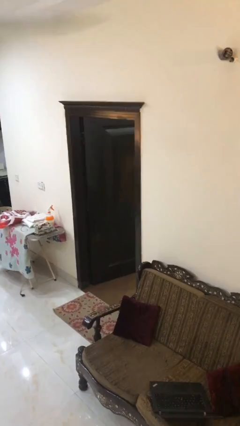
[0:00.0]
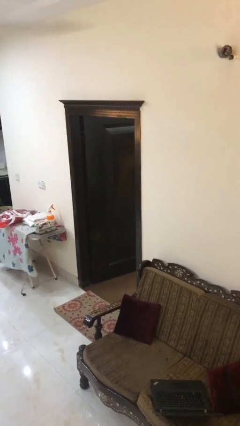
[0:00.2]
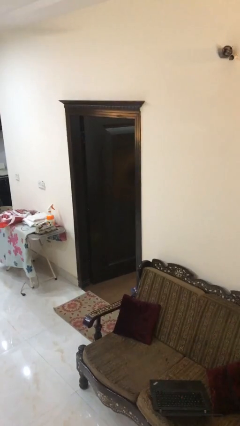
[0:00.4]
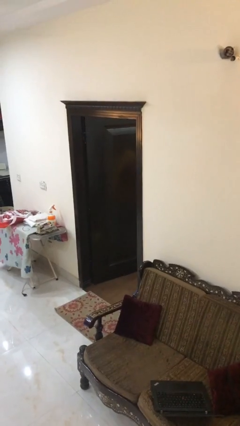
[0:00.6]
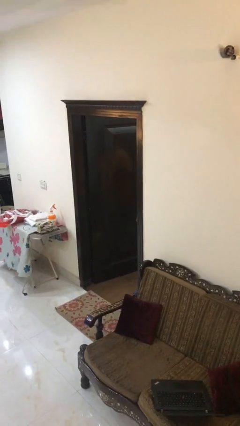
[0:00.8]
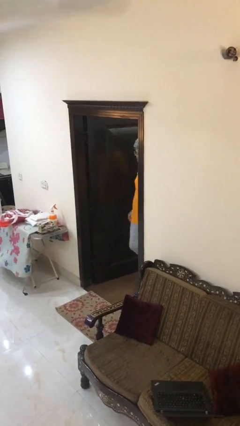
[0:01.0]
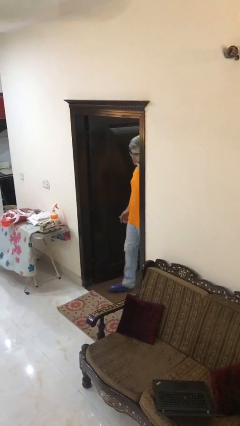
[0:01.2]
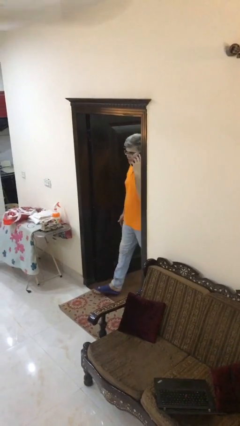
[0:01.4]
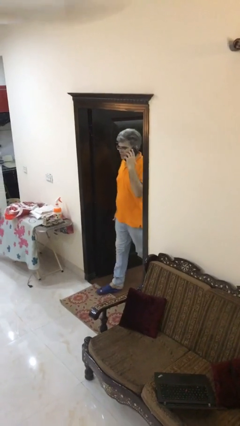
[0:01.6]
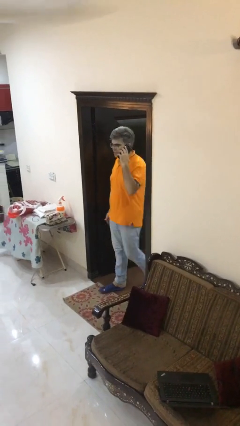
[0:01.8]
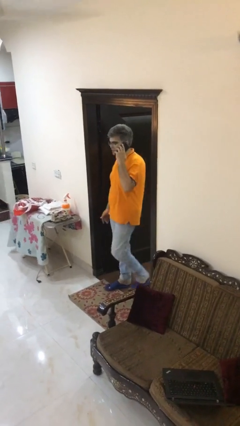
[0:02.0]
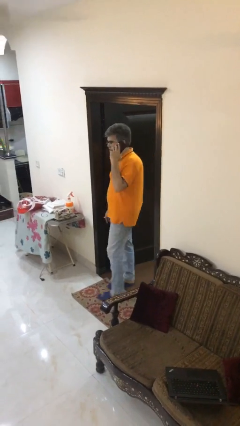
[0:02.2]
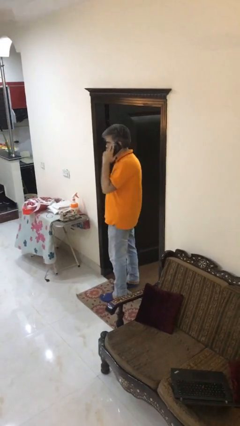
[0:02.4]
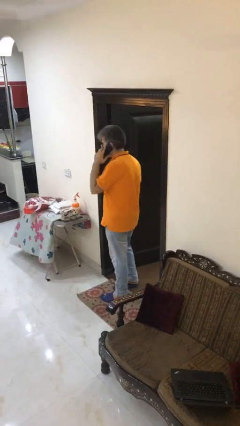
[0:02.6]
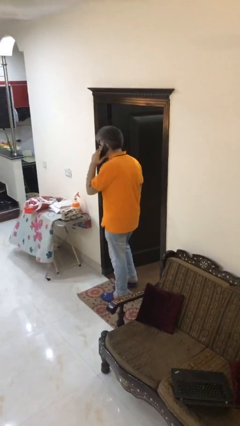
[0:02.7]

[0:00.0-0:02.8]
person enters scene through structure

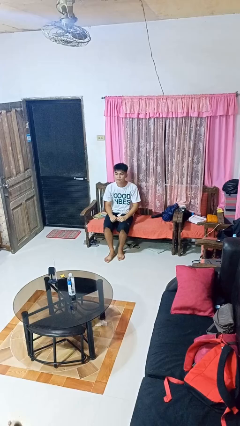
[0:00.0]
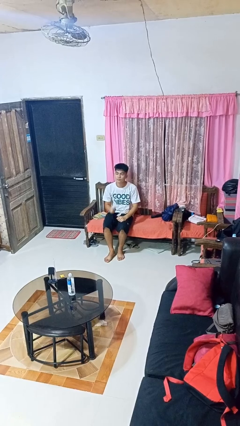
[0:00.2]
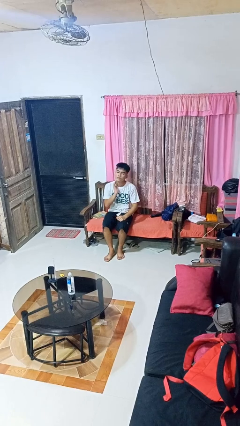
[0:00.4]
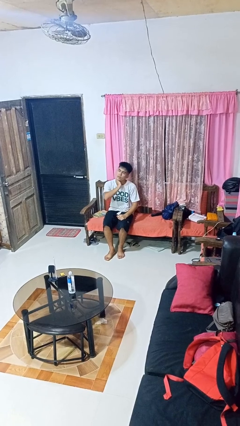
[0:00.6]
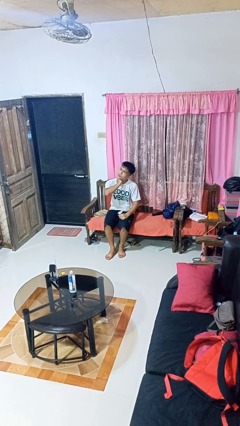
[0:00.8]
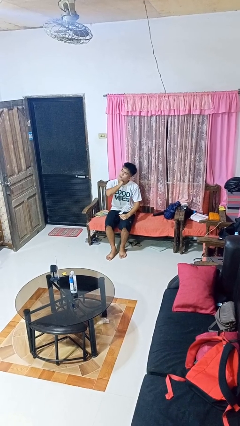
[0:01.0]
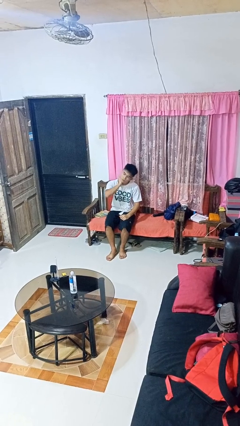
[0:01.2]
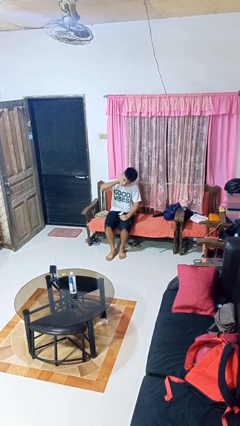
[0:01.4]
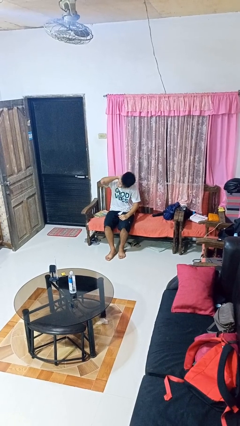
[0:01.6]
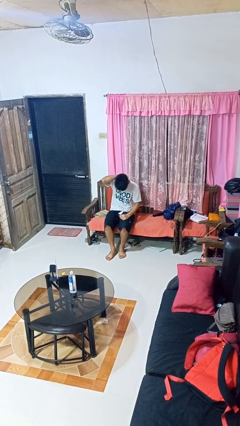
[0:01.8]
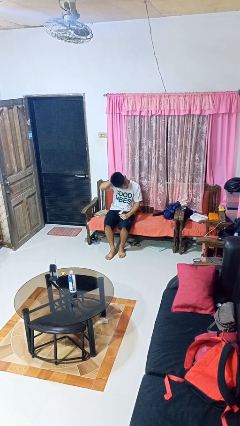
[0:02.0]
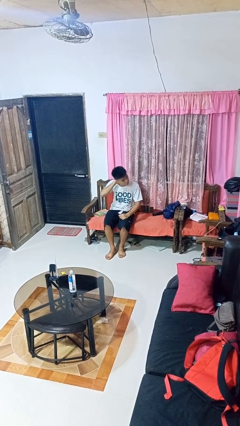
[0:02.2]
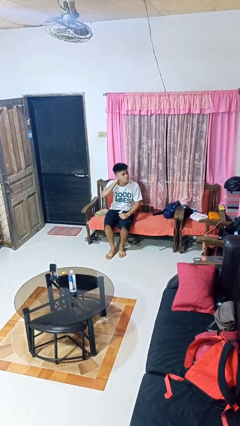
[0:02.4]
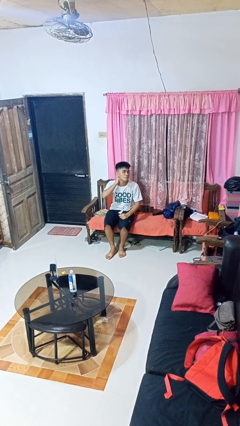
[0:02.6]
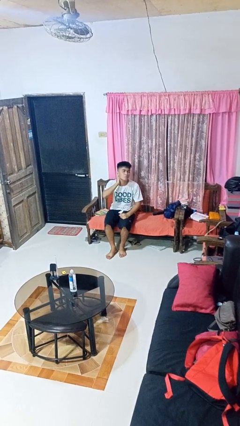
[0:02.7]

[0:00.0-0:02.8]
person rubs neck

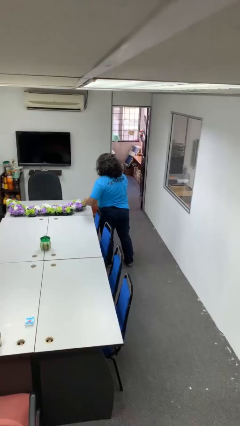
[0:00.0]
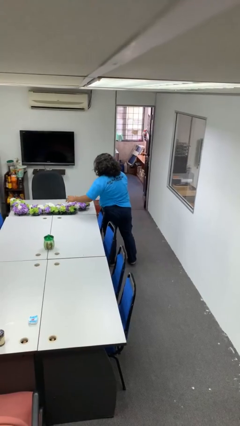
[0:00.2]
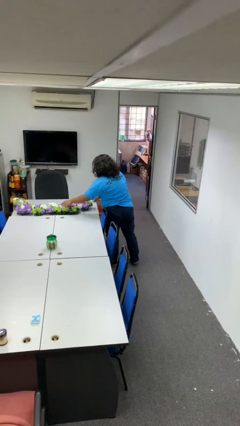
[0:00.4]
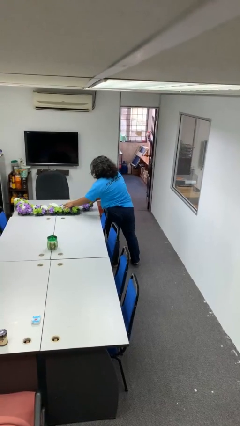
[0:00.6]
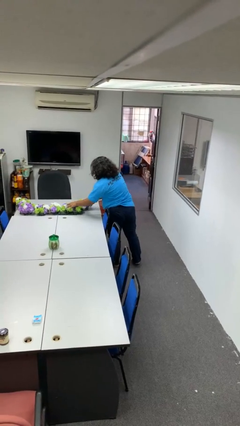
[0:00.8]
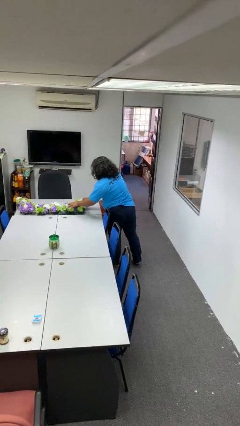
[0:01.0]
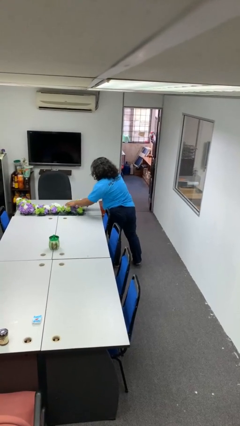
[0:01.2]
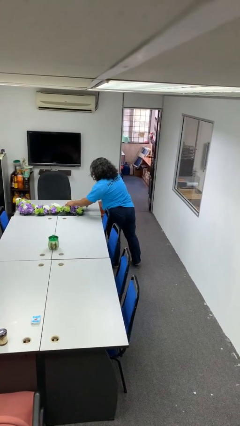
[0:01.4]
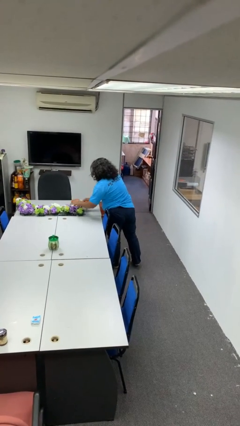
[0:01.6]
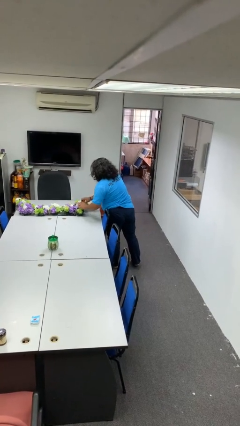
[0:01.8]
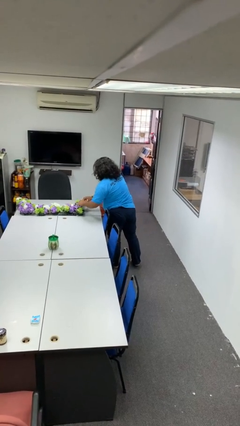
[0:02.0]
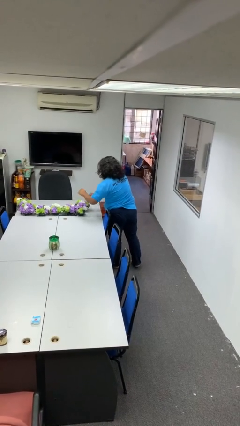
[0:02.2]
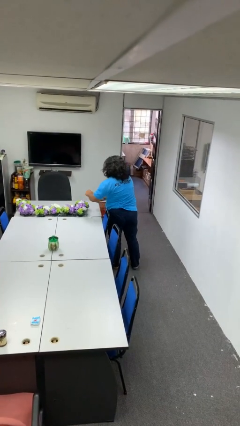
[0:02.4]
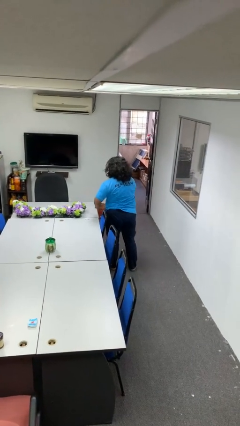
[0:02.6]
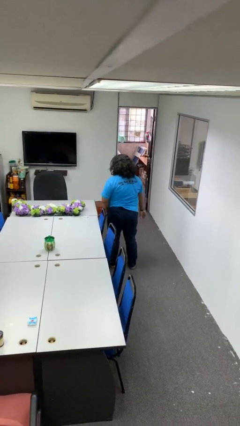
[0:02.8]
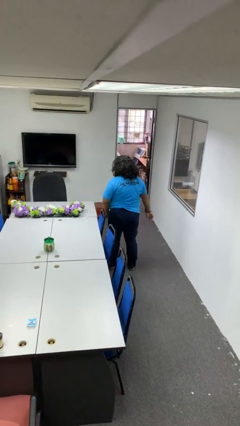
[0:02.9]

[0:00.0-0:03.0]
person arranges flowers in vase

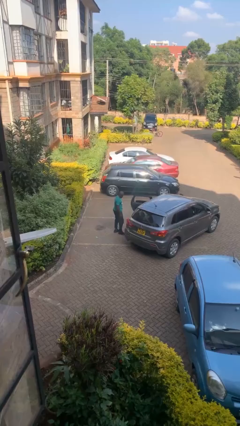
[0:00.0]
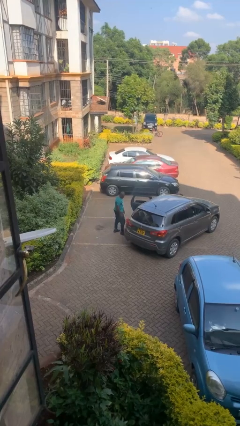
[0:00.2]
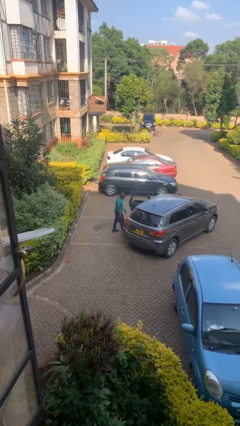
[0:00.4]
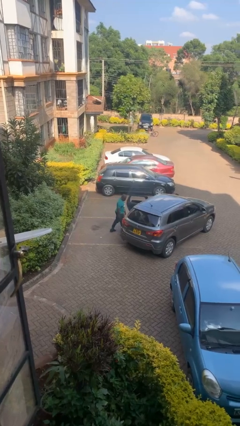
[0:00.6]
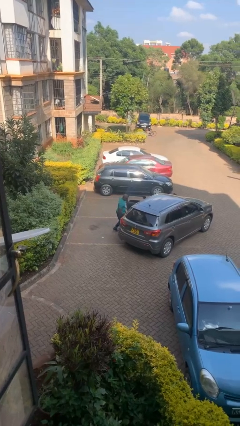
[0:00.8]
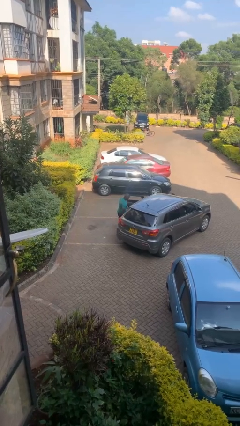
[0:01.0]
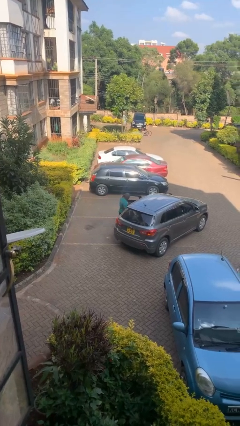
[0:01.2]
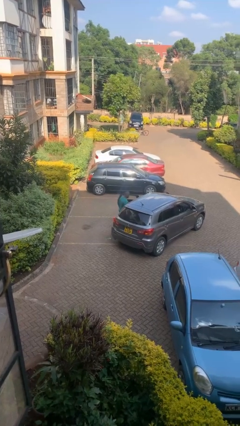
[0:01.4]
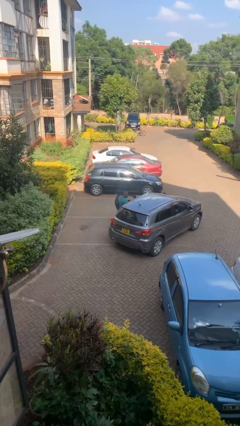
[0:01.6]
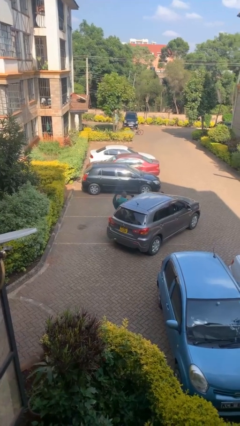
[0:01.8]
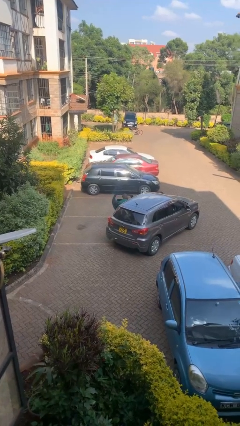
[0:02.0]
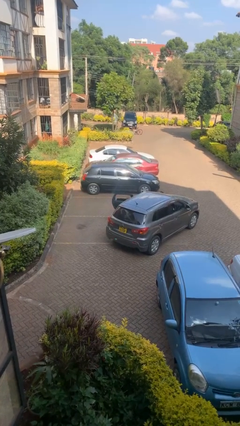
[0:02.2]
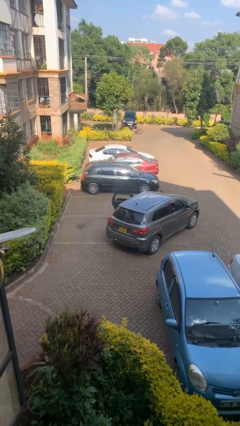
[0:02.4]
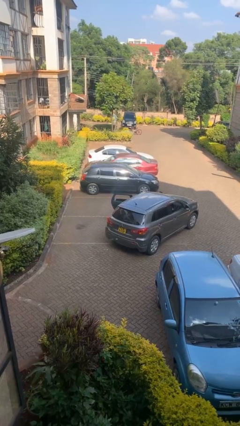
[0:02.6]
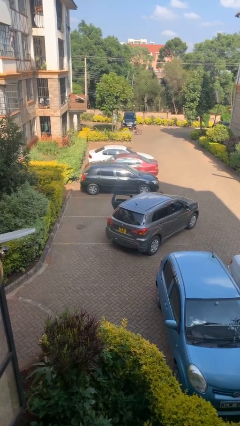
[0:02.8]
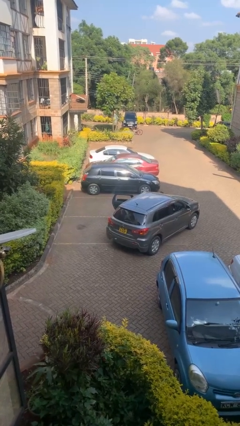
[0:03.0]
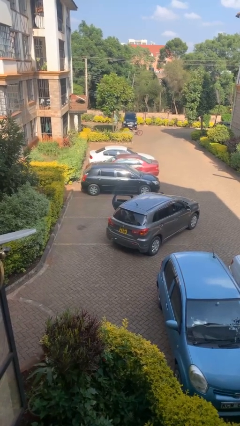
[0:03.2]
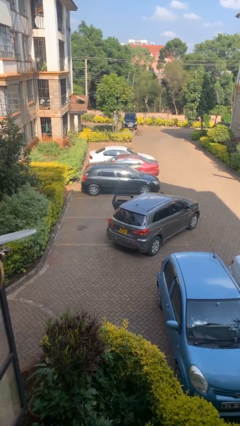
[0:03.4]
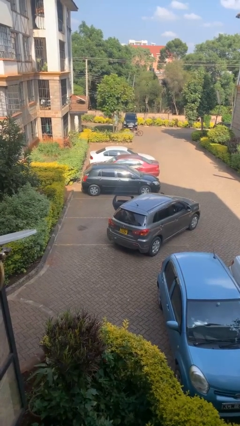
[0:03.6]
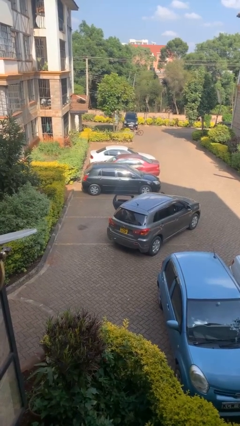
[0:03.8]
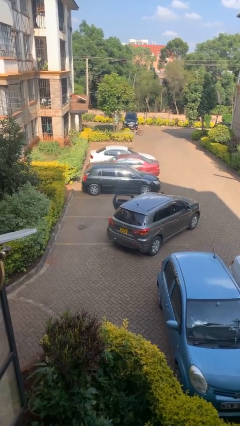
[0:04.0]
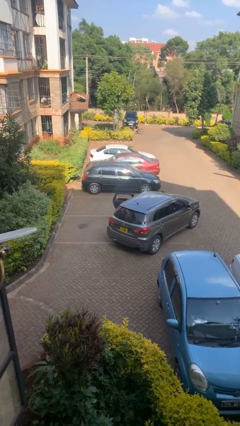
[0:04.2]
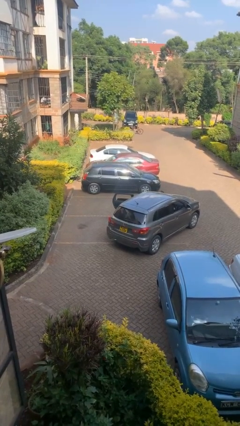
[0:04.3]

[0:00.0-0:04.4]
person enters car

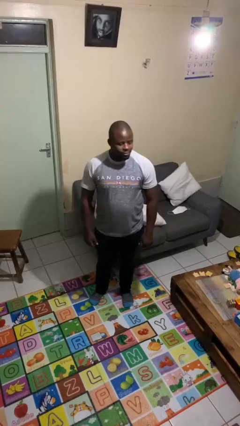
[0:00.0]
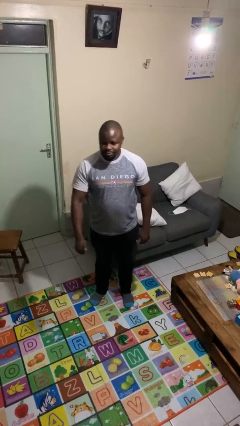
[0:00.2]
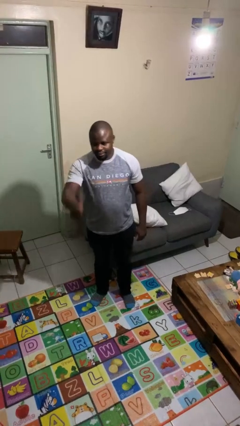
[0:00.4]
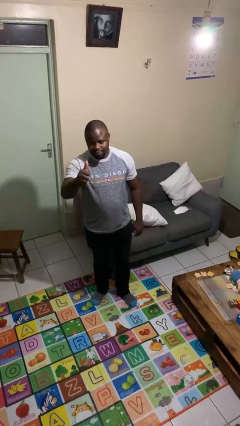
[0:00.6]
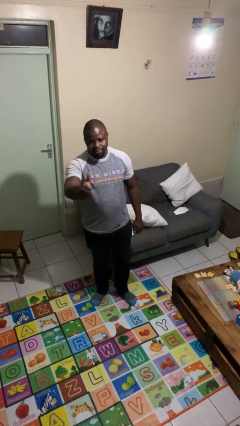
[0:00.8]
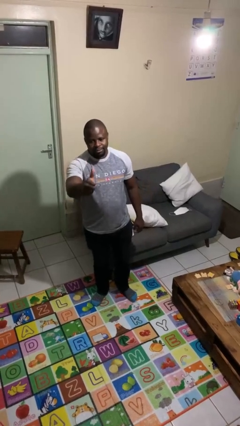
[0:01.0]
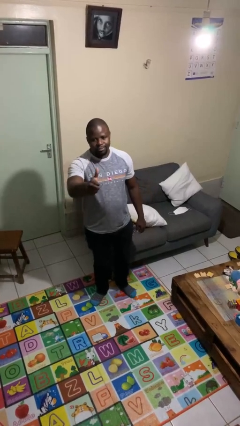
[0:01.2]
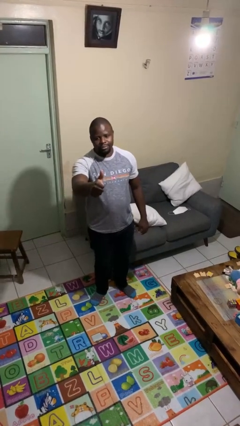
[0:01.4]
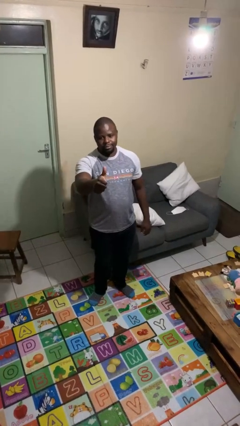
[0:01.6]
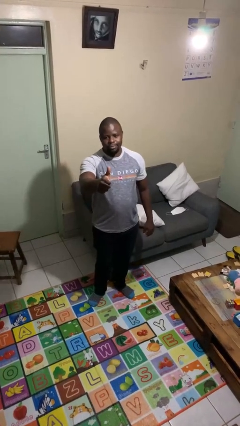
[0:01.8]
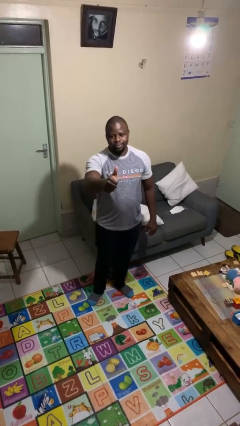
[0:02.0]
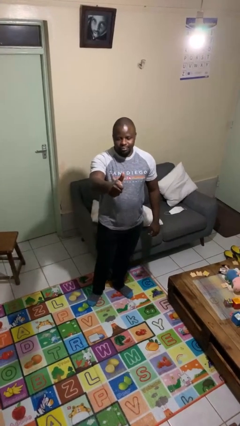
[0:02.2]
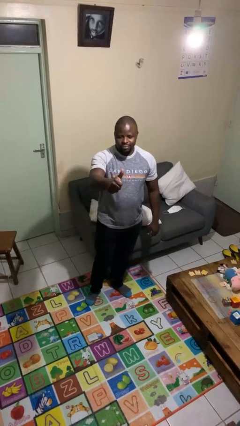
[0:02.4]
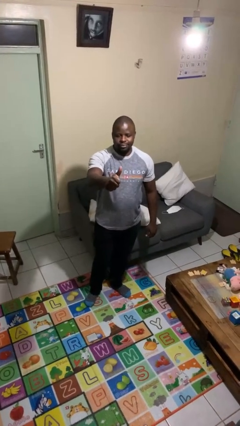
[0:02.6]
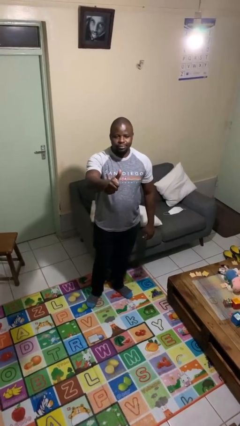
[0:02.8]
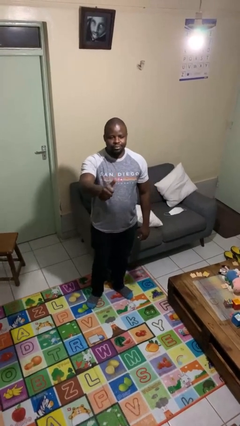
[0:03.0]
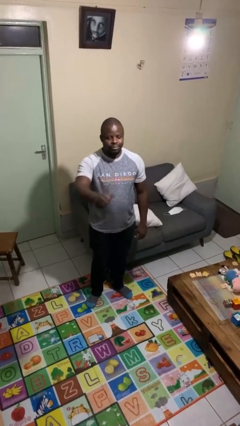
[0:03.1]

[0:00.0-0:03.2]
person gestures thumbs up

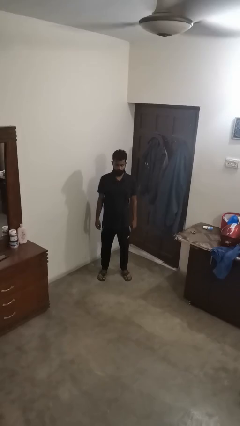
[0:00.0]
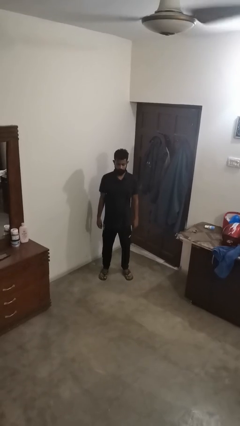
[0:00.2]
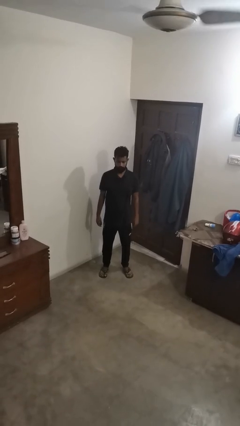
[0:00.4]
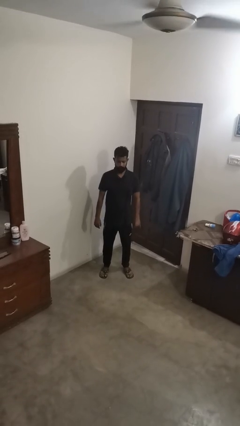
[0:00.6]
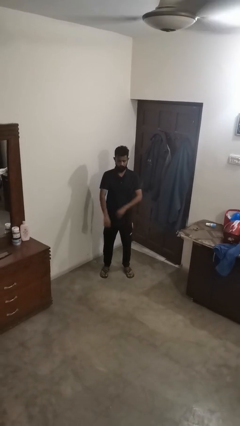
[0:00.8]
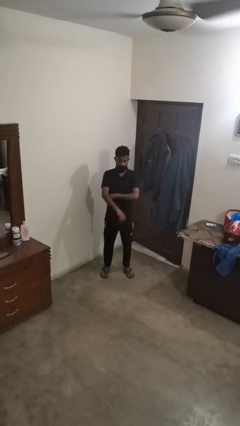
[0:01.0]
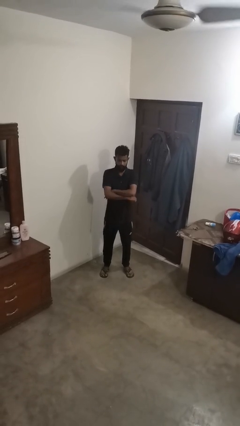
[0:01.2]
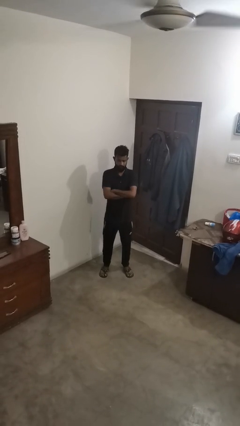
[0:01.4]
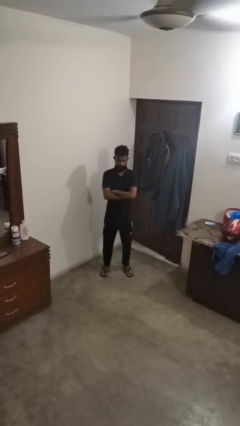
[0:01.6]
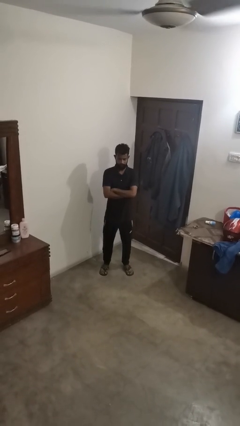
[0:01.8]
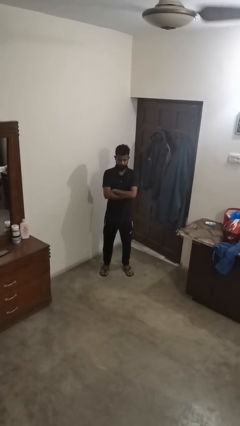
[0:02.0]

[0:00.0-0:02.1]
person crosses arms
